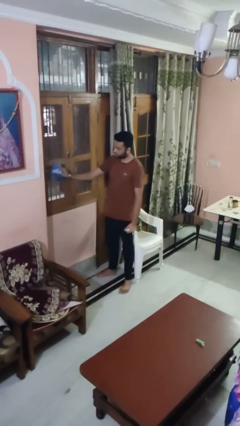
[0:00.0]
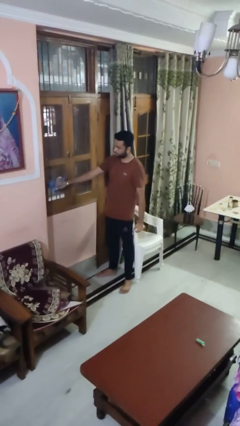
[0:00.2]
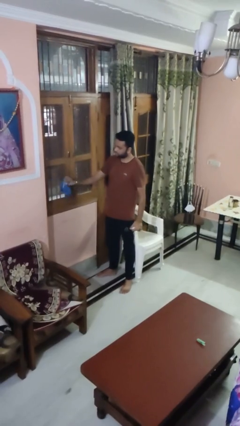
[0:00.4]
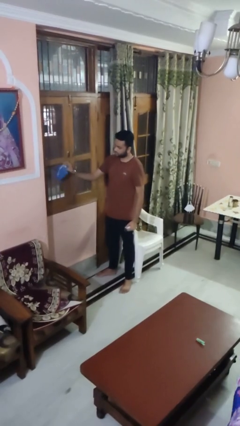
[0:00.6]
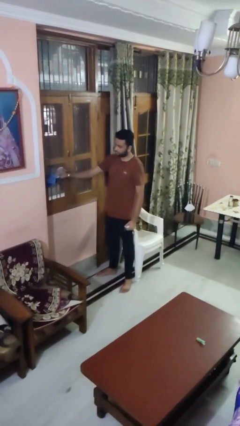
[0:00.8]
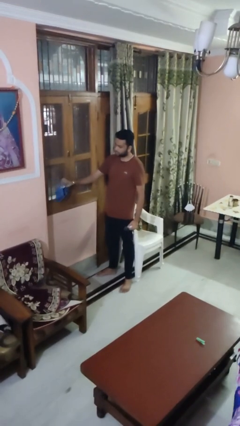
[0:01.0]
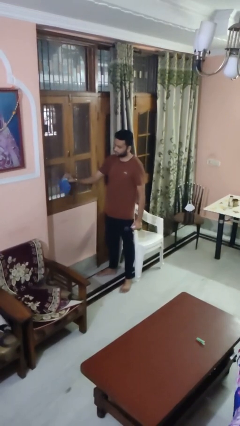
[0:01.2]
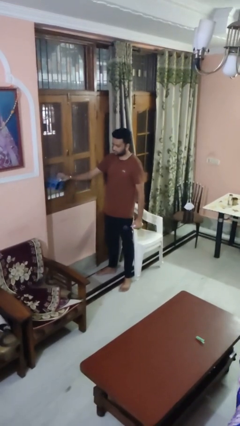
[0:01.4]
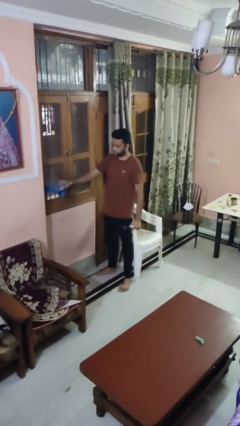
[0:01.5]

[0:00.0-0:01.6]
person washes window

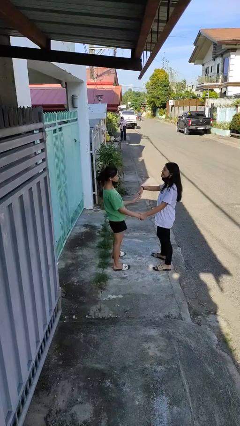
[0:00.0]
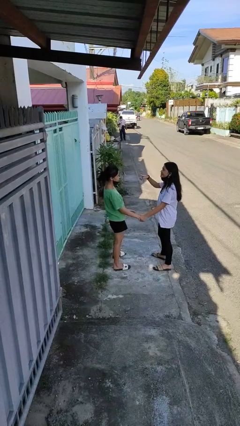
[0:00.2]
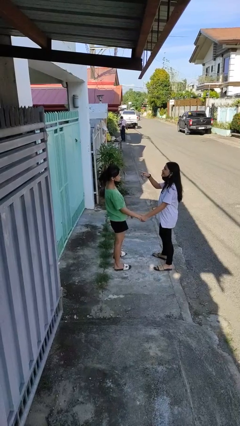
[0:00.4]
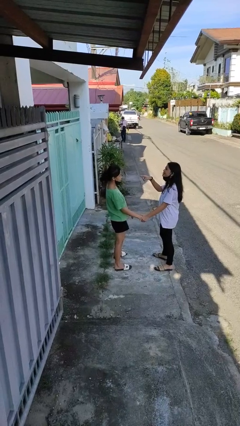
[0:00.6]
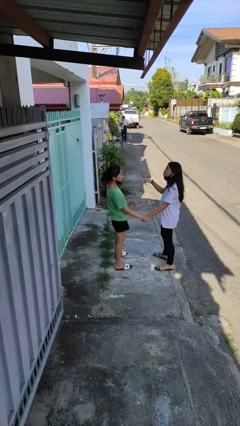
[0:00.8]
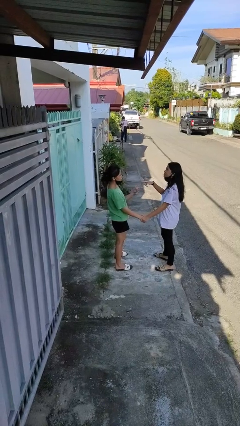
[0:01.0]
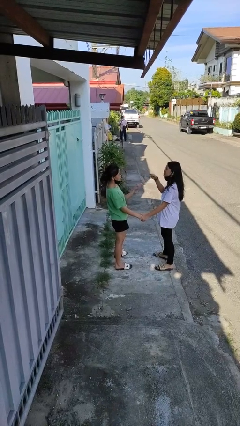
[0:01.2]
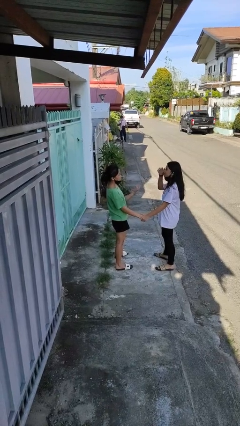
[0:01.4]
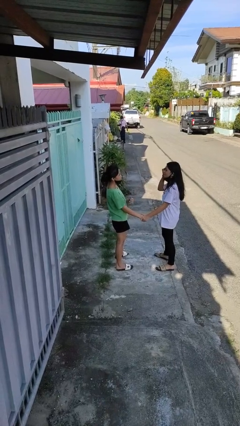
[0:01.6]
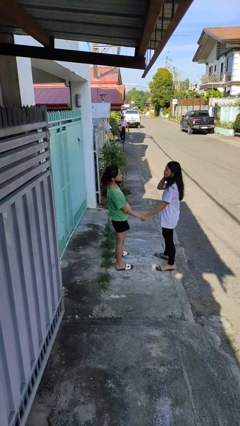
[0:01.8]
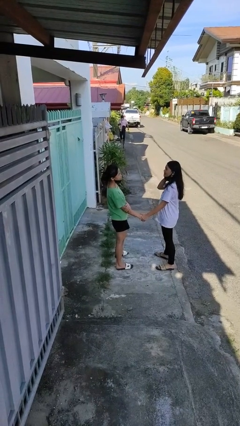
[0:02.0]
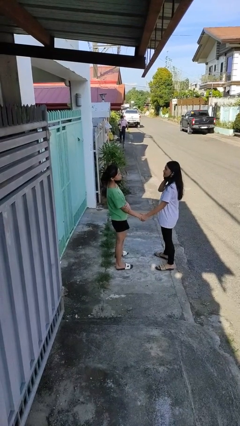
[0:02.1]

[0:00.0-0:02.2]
person talks to person

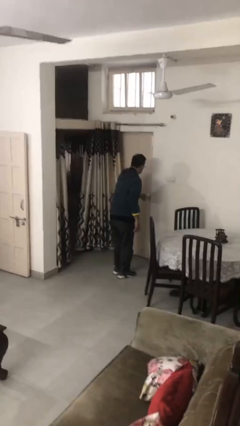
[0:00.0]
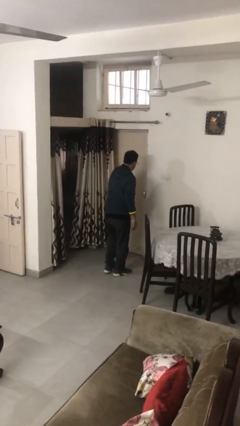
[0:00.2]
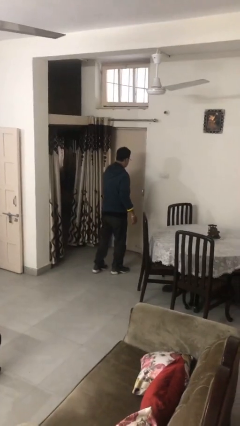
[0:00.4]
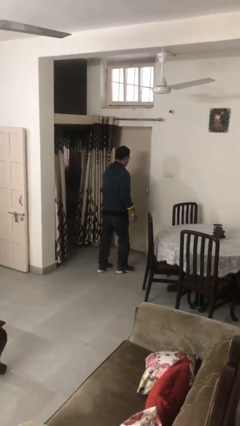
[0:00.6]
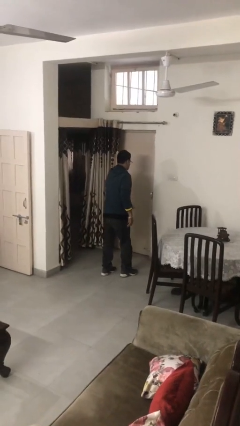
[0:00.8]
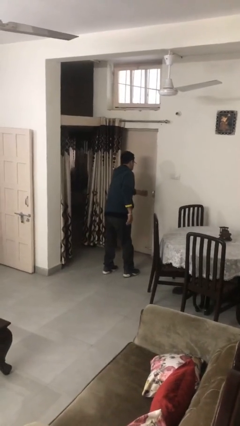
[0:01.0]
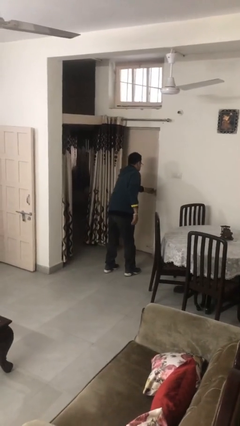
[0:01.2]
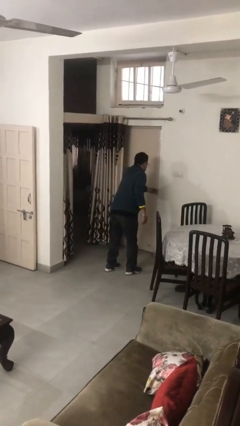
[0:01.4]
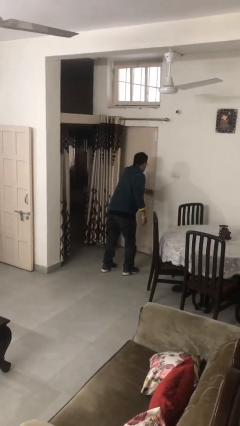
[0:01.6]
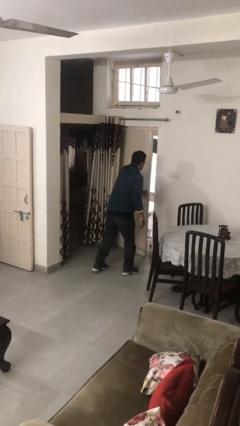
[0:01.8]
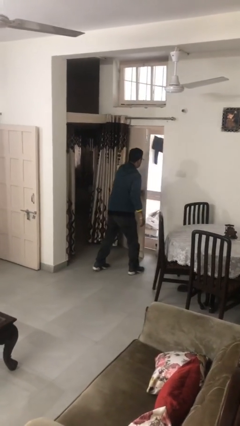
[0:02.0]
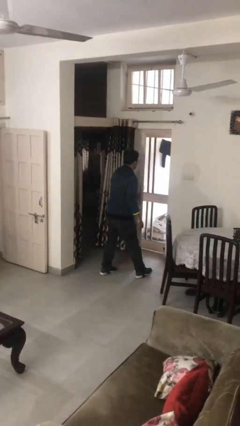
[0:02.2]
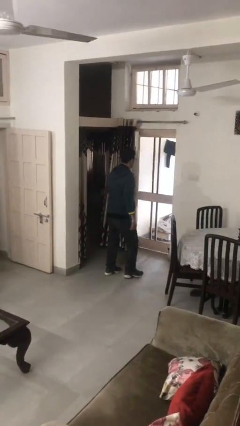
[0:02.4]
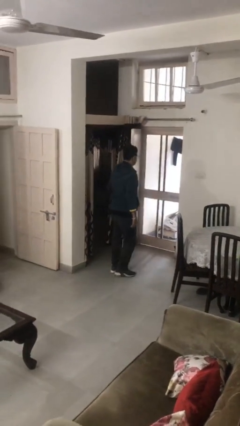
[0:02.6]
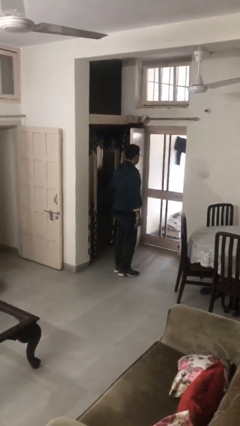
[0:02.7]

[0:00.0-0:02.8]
person opens facility door

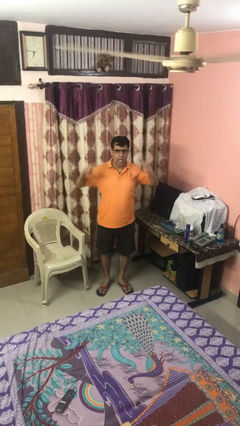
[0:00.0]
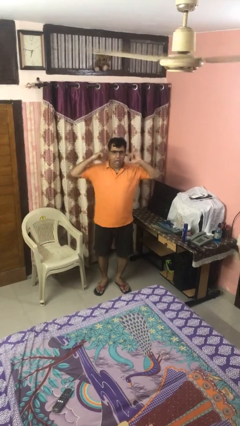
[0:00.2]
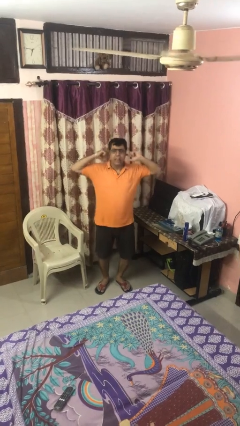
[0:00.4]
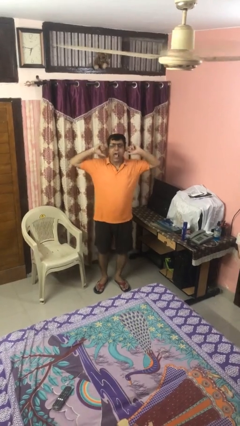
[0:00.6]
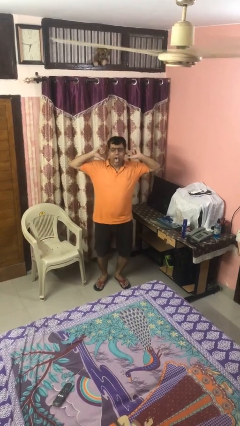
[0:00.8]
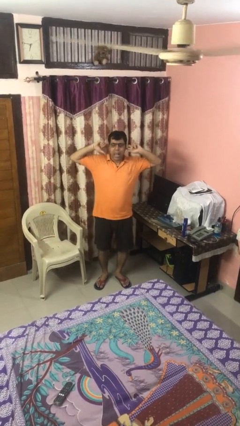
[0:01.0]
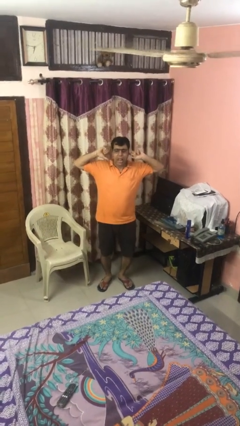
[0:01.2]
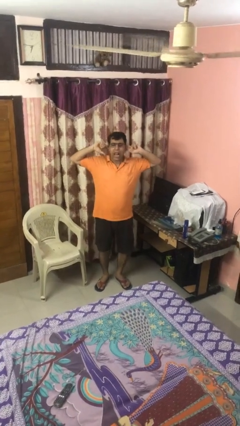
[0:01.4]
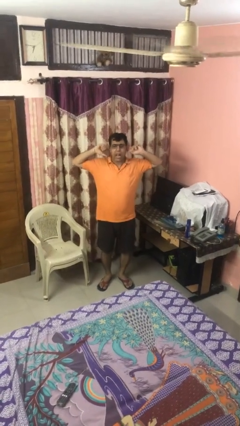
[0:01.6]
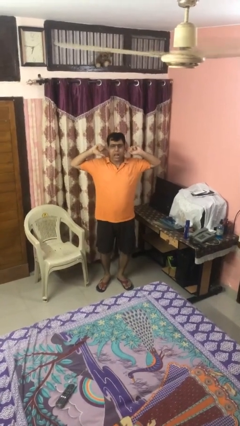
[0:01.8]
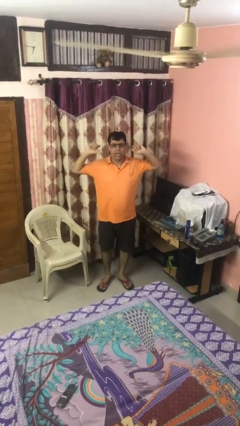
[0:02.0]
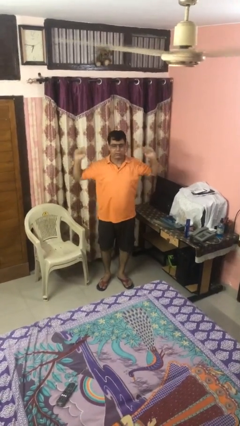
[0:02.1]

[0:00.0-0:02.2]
person puts fingers in ear

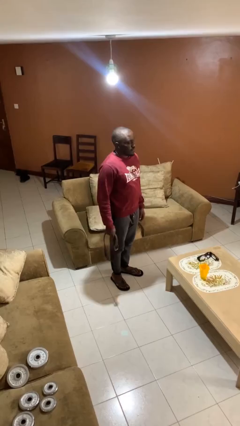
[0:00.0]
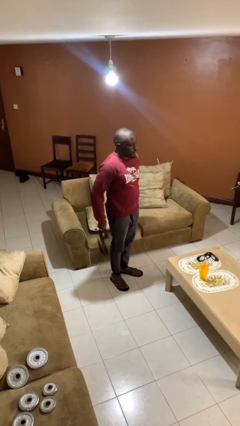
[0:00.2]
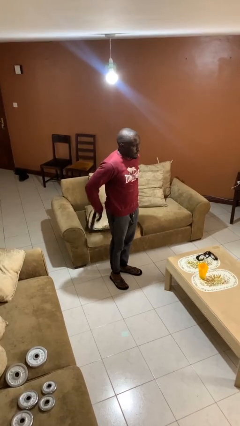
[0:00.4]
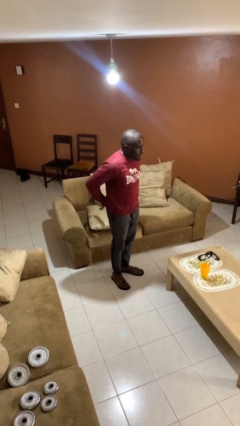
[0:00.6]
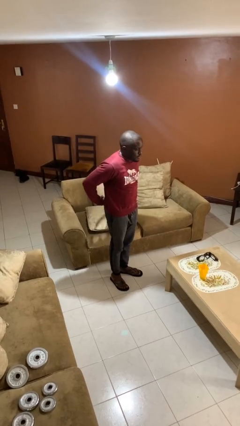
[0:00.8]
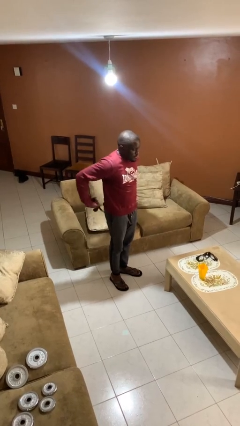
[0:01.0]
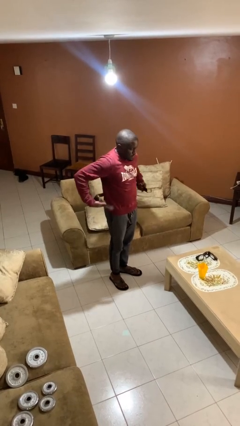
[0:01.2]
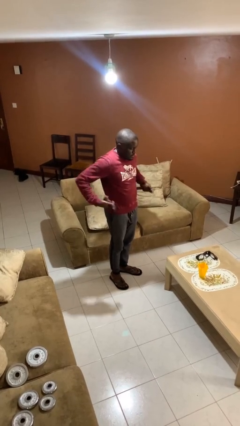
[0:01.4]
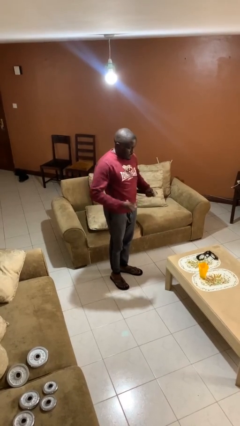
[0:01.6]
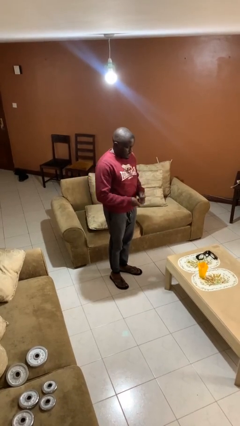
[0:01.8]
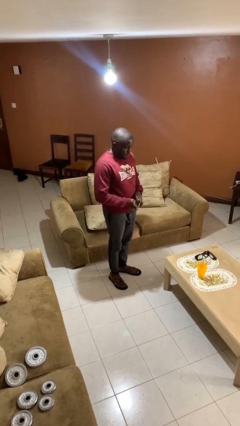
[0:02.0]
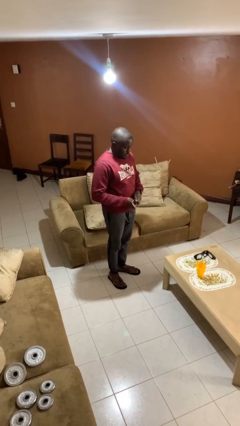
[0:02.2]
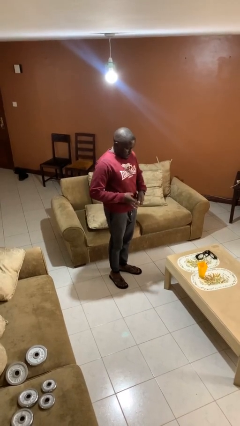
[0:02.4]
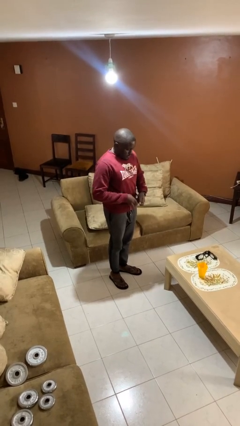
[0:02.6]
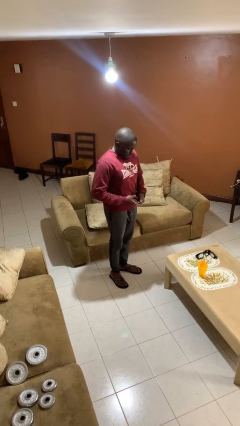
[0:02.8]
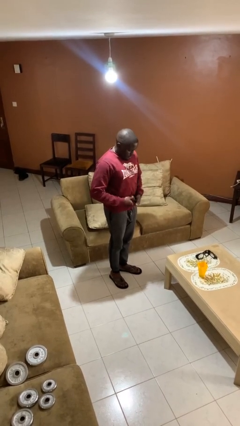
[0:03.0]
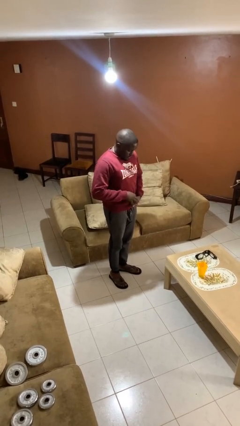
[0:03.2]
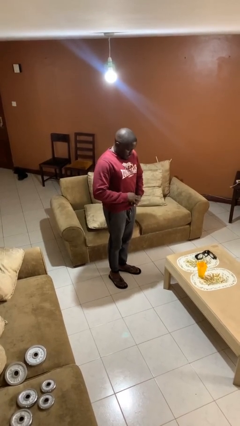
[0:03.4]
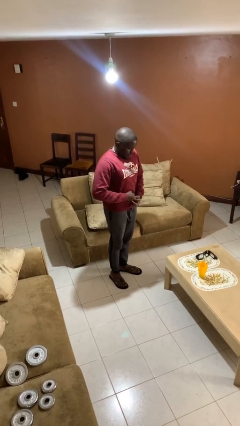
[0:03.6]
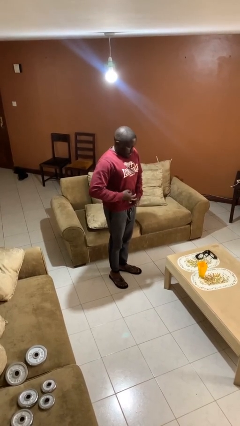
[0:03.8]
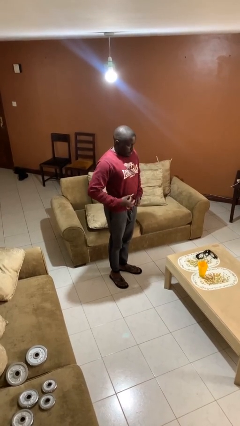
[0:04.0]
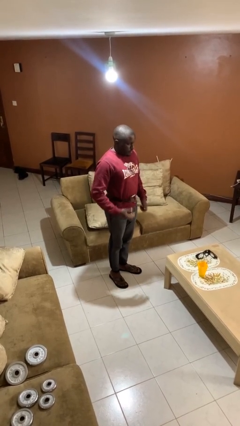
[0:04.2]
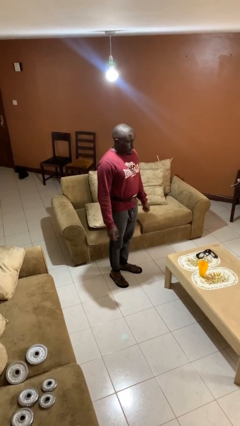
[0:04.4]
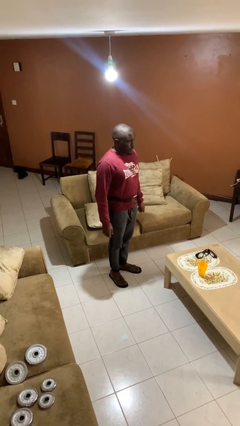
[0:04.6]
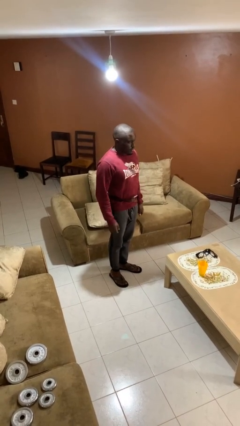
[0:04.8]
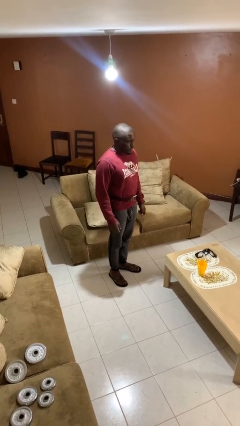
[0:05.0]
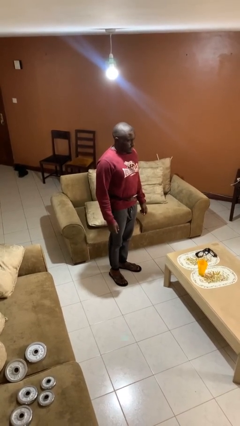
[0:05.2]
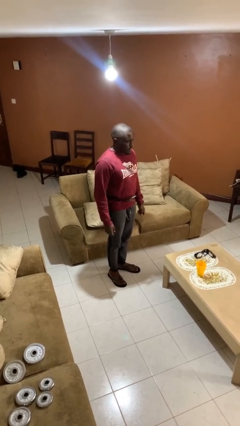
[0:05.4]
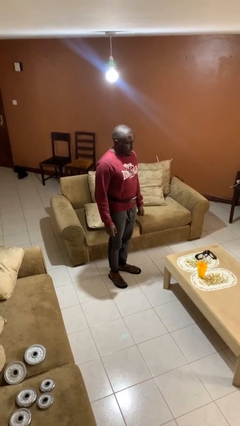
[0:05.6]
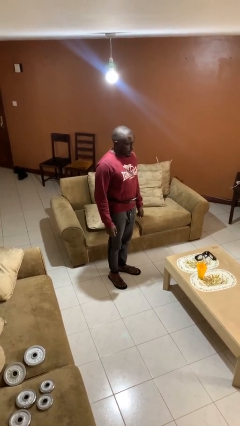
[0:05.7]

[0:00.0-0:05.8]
person puts on belt

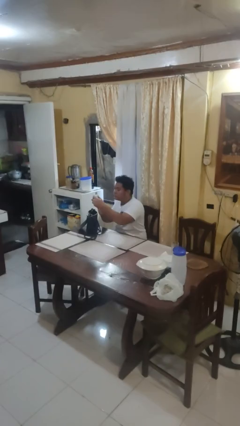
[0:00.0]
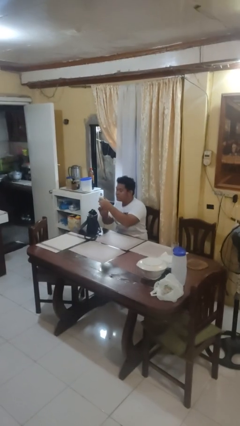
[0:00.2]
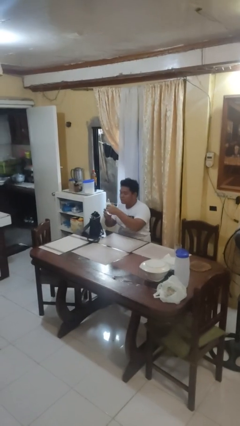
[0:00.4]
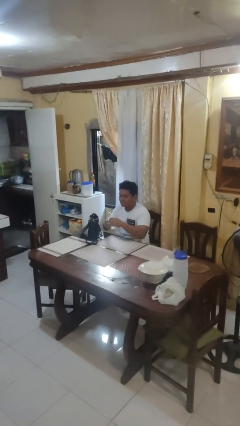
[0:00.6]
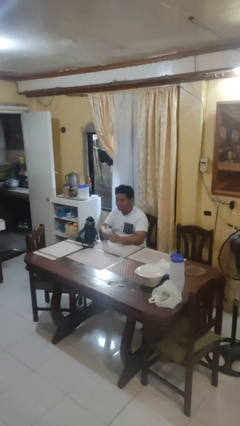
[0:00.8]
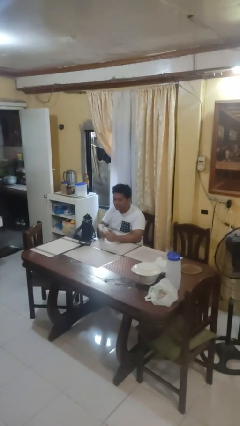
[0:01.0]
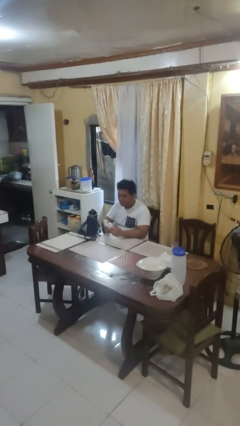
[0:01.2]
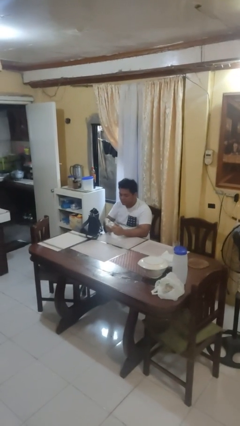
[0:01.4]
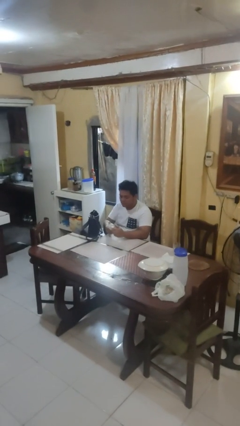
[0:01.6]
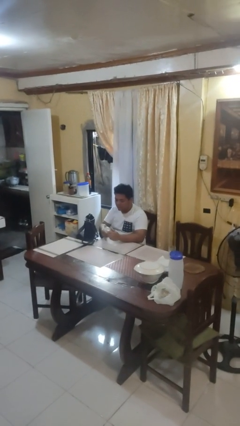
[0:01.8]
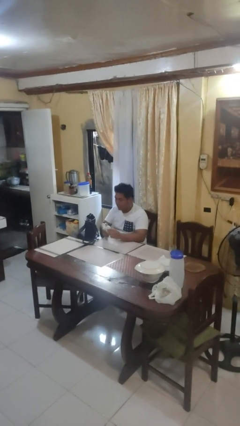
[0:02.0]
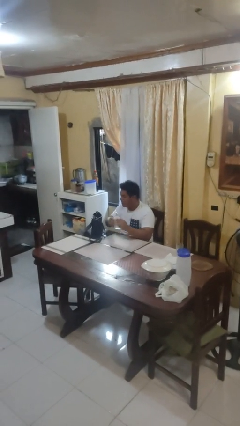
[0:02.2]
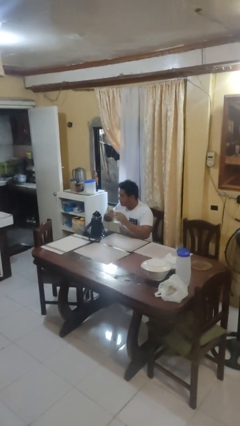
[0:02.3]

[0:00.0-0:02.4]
person takes object from purse

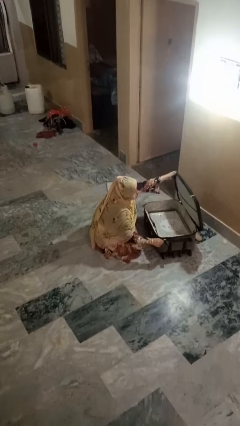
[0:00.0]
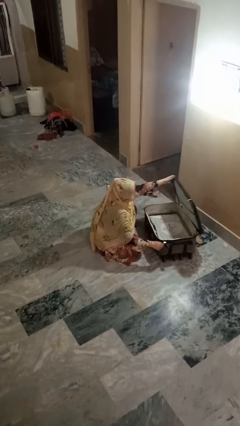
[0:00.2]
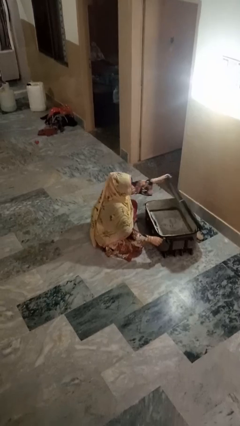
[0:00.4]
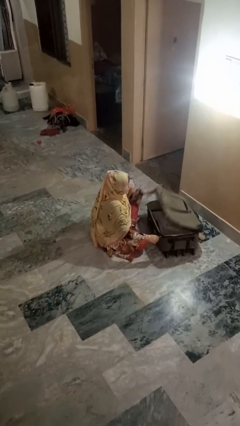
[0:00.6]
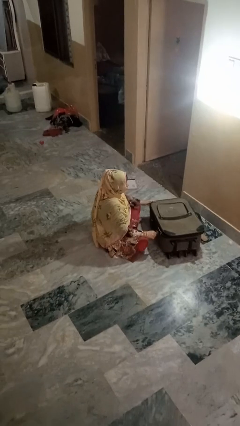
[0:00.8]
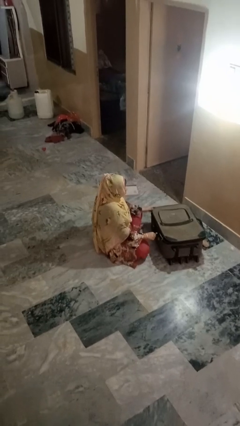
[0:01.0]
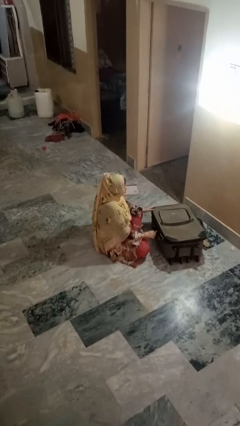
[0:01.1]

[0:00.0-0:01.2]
person closes suitcase
